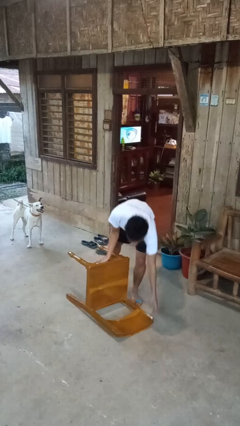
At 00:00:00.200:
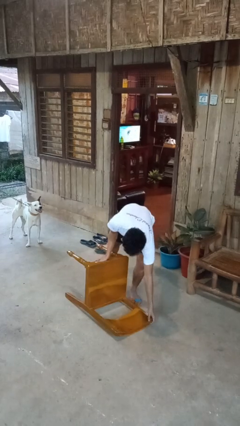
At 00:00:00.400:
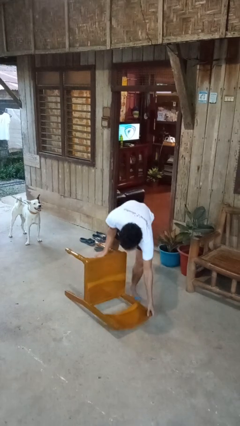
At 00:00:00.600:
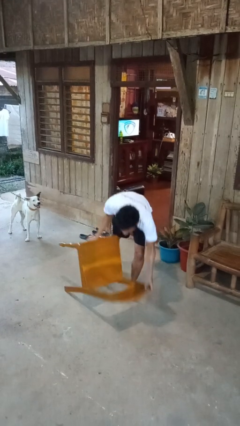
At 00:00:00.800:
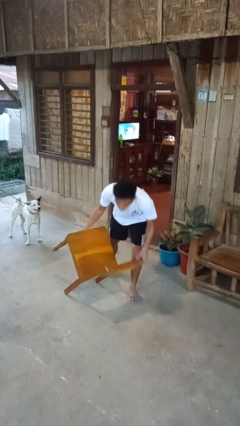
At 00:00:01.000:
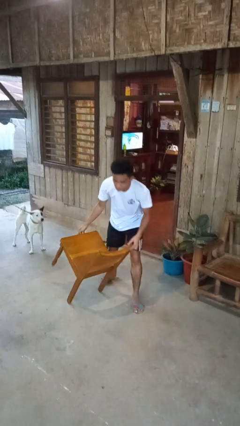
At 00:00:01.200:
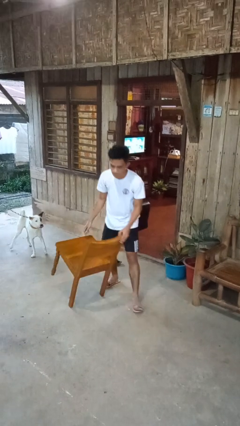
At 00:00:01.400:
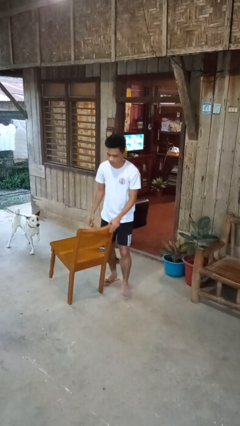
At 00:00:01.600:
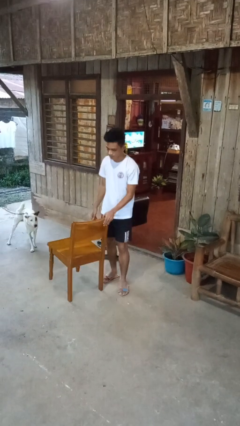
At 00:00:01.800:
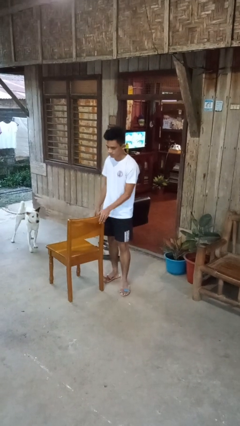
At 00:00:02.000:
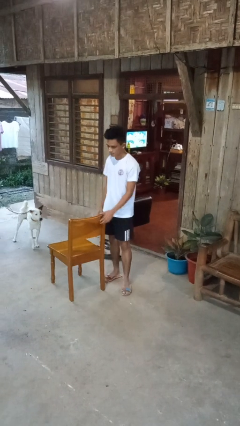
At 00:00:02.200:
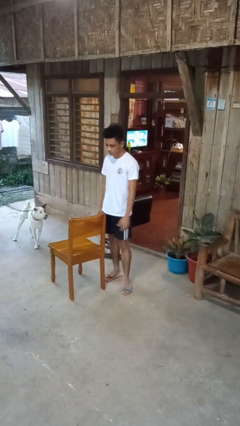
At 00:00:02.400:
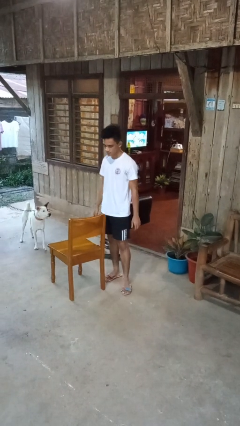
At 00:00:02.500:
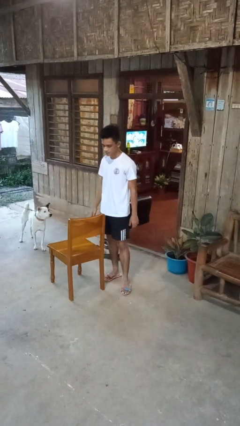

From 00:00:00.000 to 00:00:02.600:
person sets upright furniture

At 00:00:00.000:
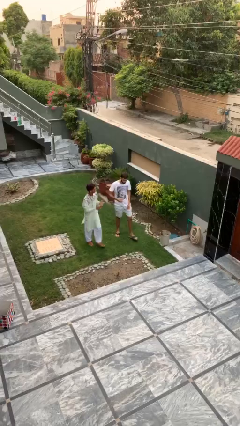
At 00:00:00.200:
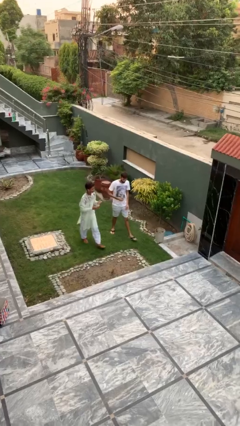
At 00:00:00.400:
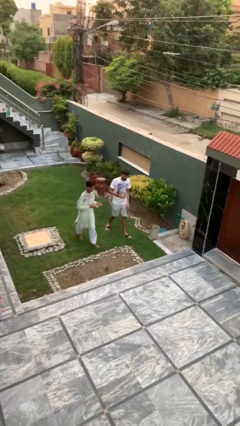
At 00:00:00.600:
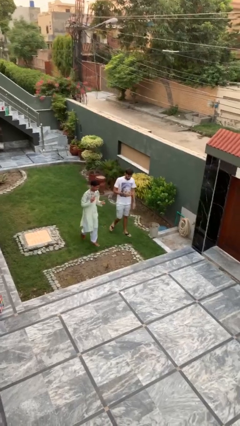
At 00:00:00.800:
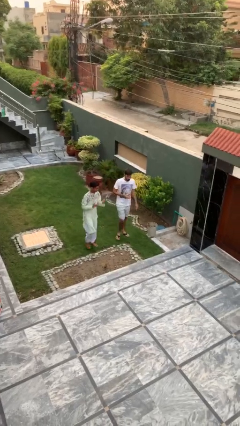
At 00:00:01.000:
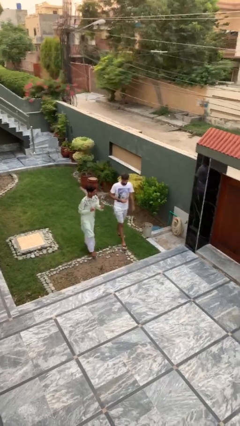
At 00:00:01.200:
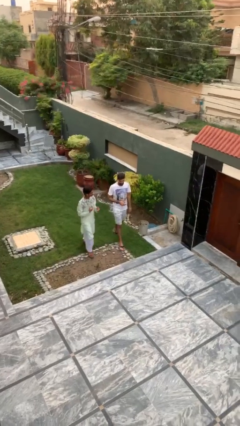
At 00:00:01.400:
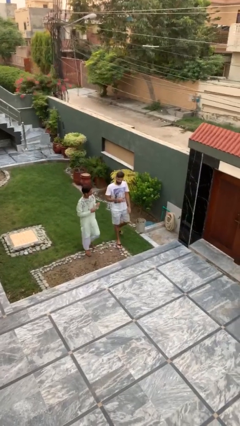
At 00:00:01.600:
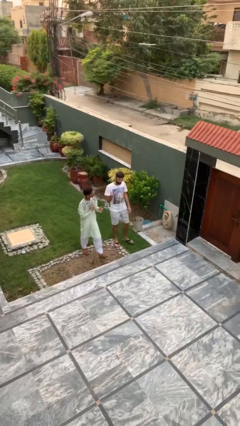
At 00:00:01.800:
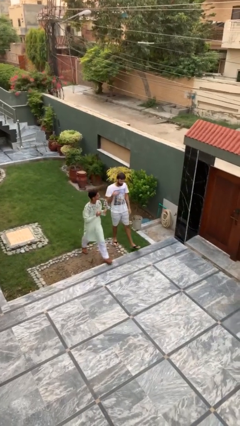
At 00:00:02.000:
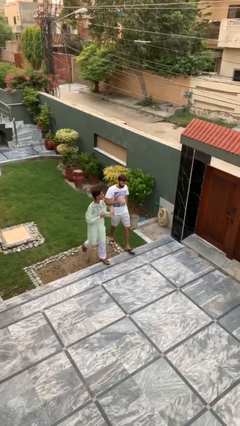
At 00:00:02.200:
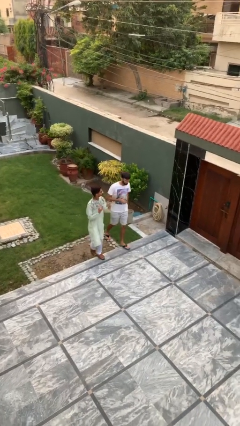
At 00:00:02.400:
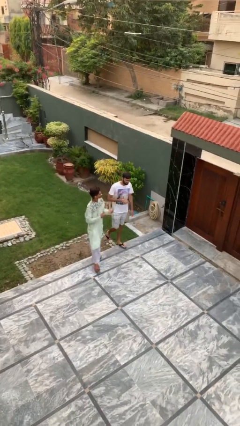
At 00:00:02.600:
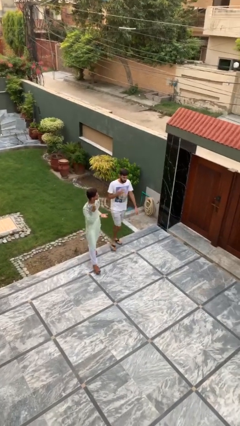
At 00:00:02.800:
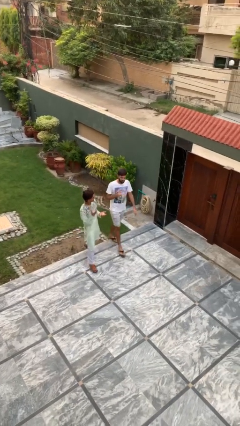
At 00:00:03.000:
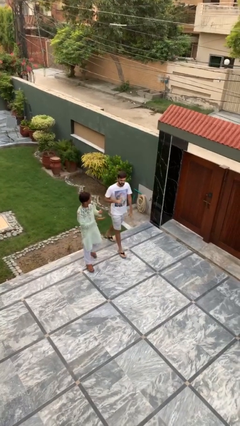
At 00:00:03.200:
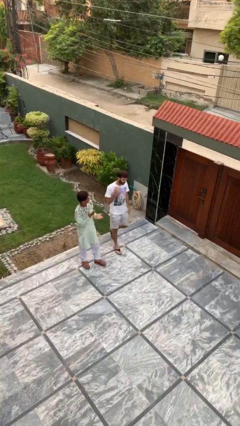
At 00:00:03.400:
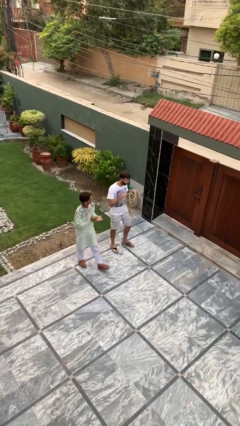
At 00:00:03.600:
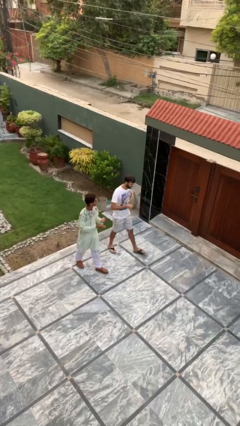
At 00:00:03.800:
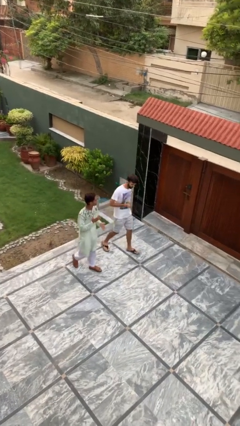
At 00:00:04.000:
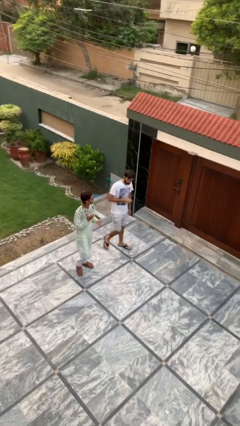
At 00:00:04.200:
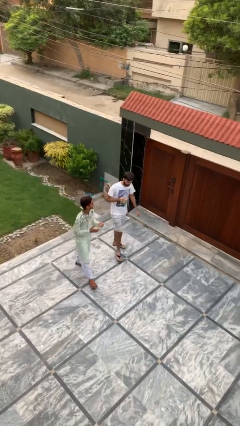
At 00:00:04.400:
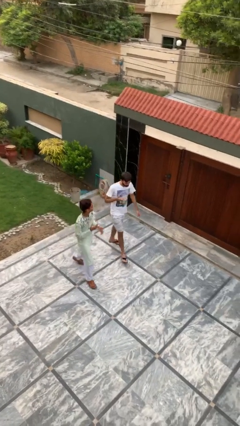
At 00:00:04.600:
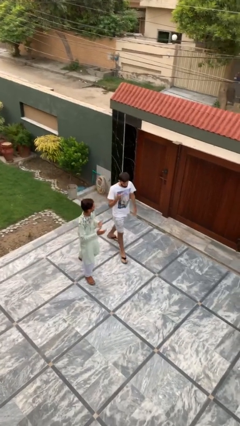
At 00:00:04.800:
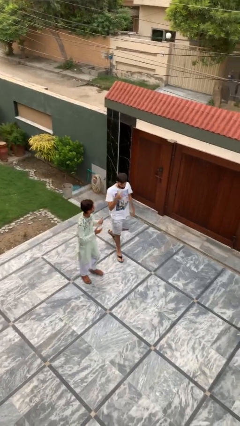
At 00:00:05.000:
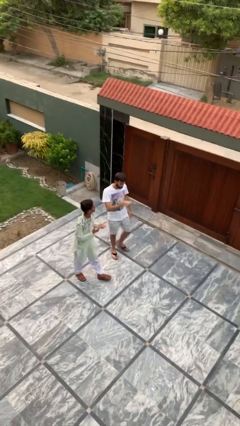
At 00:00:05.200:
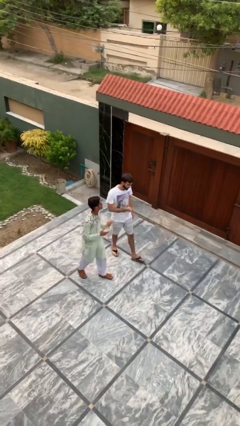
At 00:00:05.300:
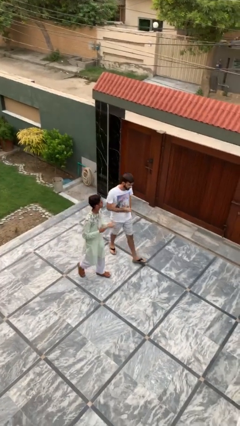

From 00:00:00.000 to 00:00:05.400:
person talks to person

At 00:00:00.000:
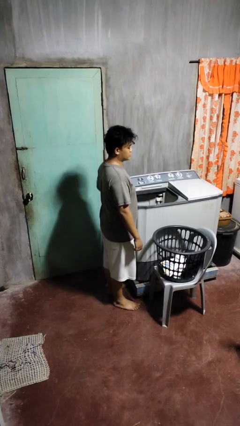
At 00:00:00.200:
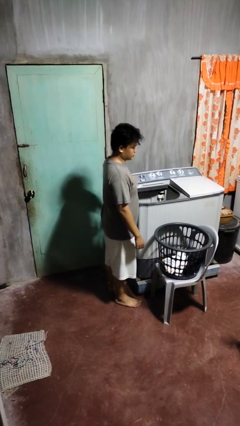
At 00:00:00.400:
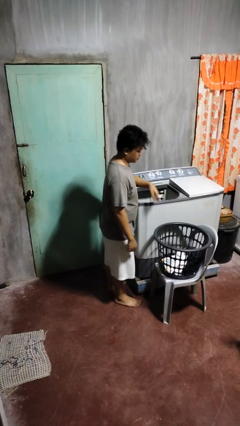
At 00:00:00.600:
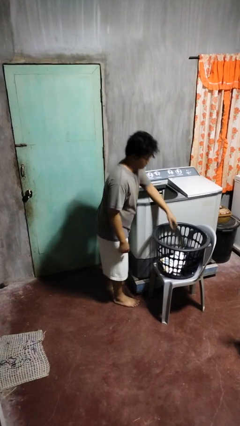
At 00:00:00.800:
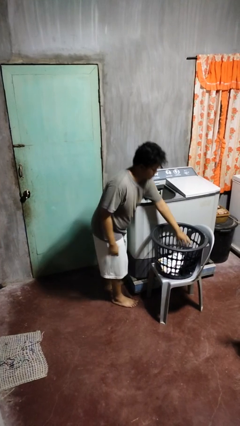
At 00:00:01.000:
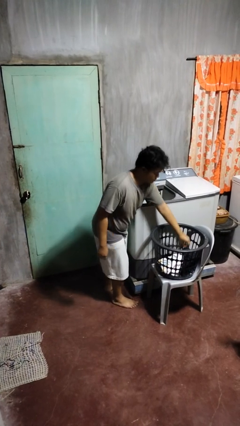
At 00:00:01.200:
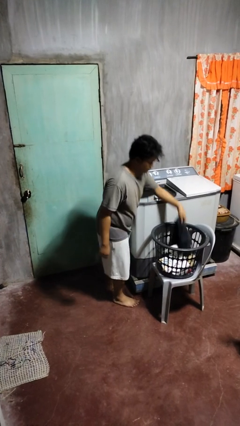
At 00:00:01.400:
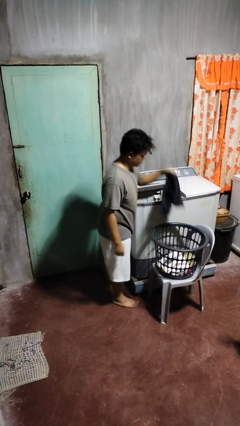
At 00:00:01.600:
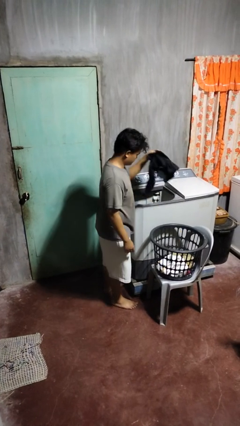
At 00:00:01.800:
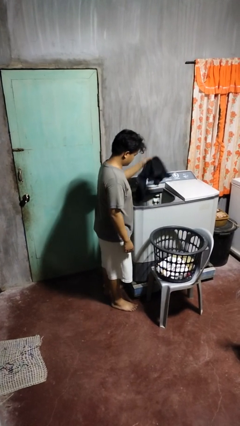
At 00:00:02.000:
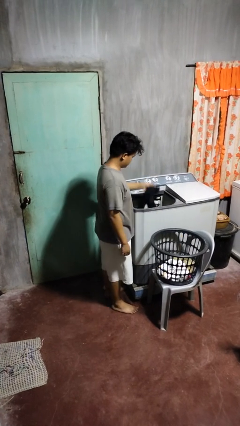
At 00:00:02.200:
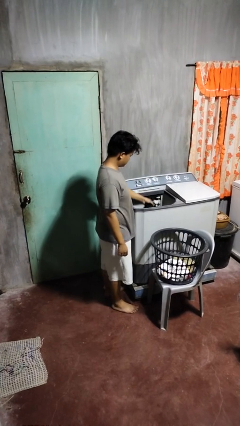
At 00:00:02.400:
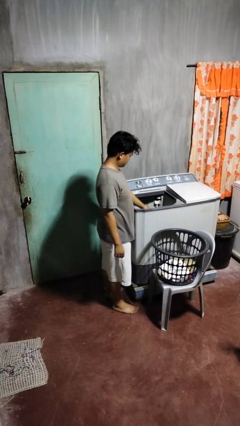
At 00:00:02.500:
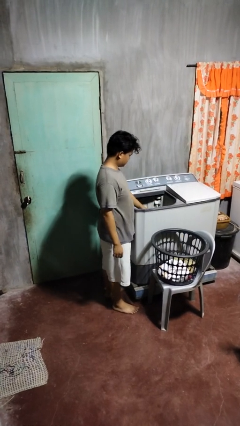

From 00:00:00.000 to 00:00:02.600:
person loads clotheswasher

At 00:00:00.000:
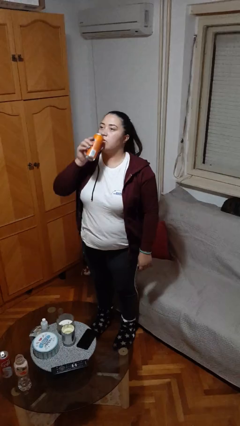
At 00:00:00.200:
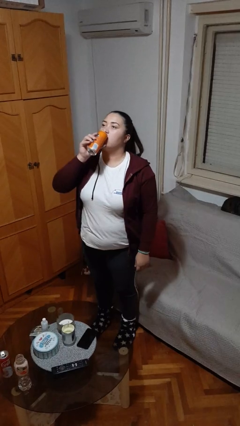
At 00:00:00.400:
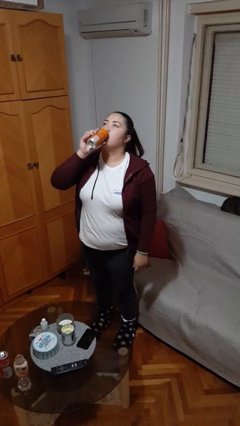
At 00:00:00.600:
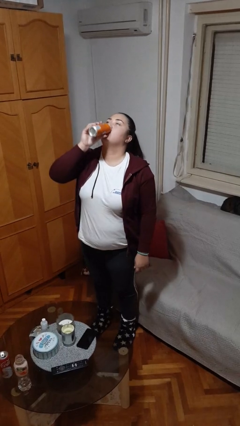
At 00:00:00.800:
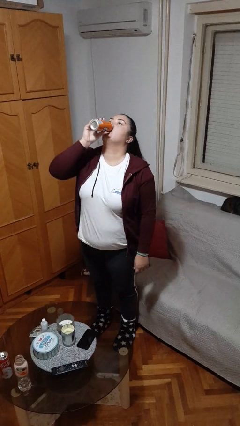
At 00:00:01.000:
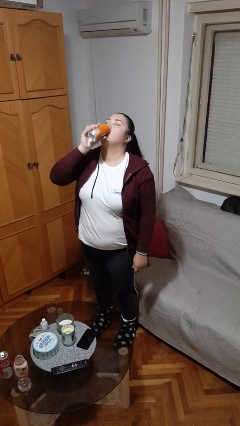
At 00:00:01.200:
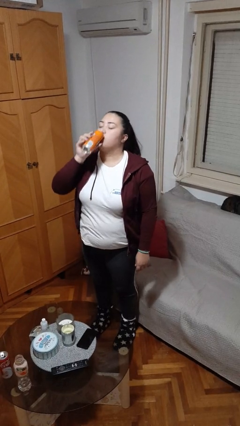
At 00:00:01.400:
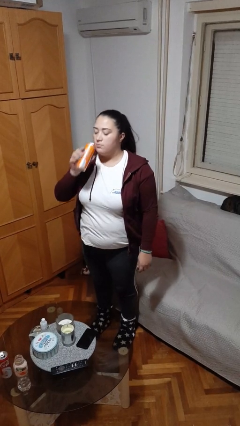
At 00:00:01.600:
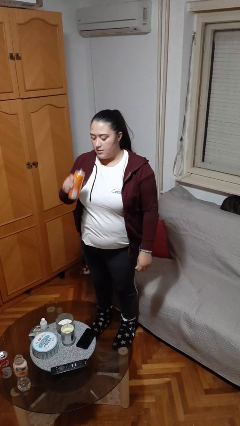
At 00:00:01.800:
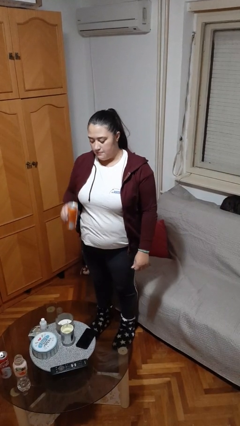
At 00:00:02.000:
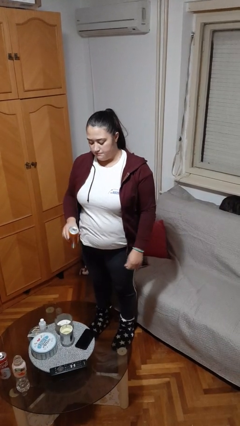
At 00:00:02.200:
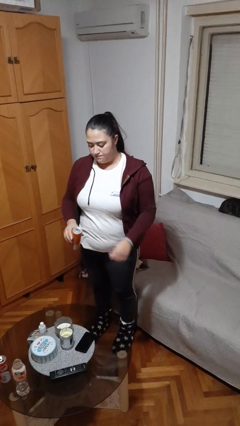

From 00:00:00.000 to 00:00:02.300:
person drinks from beverage can

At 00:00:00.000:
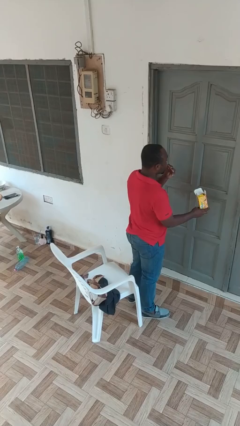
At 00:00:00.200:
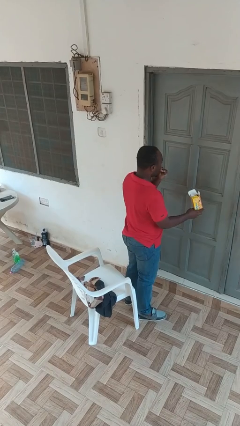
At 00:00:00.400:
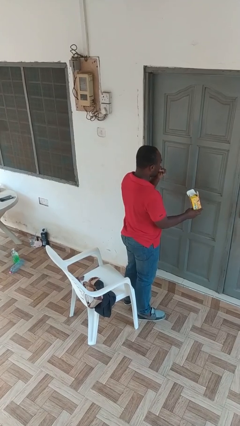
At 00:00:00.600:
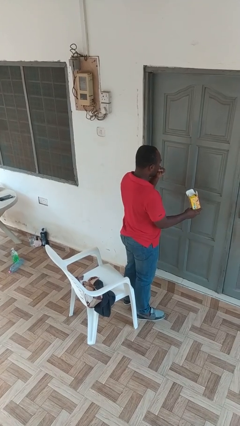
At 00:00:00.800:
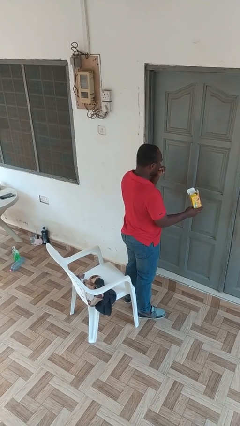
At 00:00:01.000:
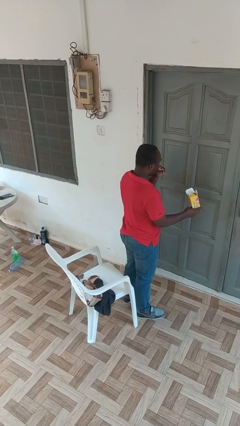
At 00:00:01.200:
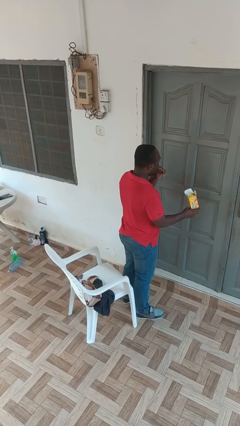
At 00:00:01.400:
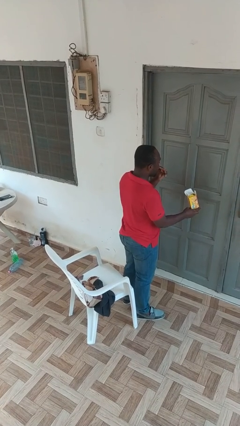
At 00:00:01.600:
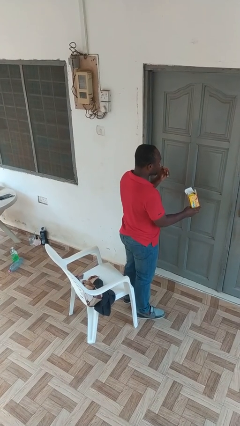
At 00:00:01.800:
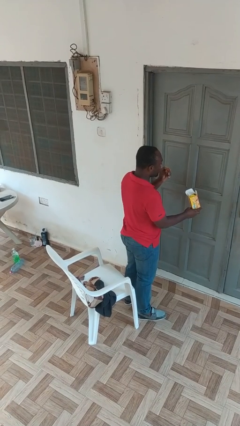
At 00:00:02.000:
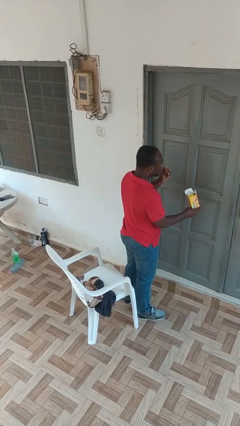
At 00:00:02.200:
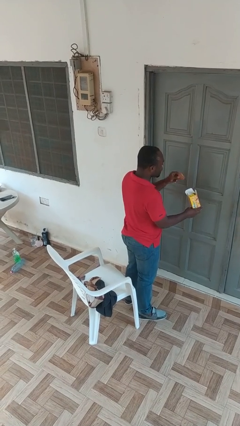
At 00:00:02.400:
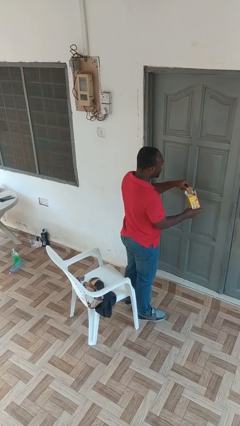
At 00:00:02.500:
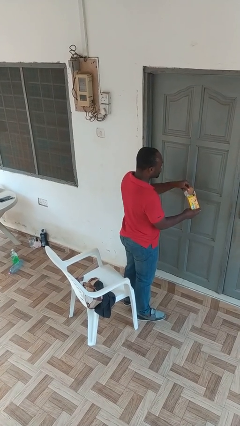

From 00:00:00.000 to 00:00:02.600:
person eats snack from bag

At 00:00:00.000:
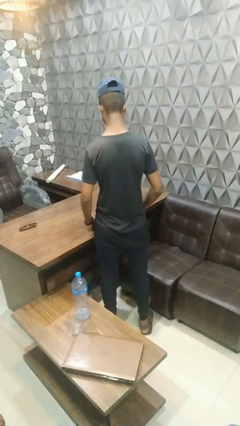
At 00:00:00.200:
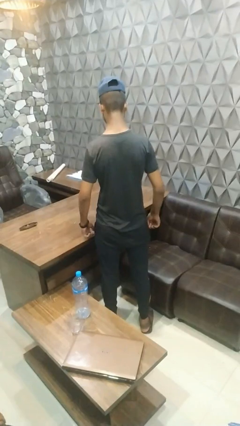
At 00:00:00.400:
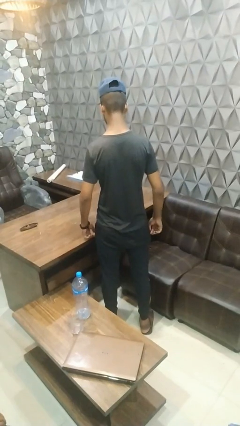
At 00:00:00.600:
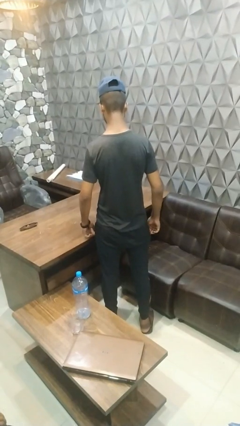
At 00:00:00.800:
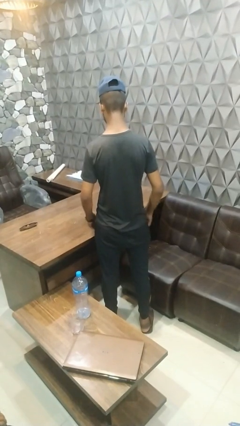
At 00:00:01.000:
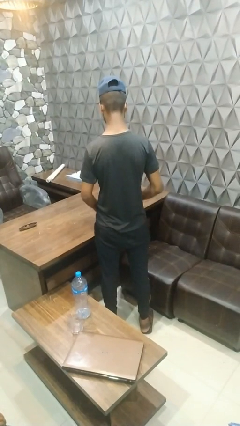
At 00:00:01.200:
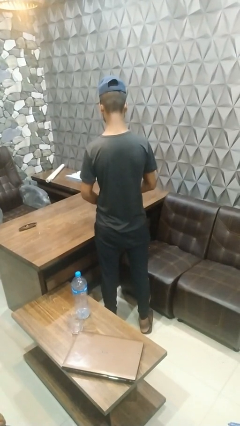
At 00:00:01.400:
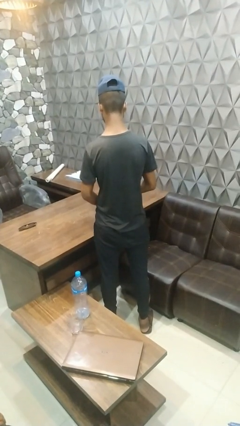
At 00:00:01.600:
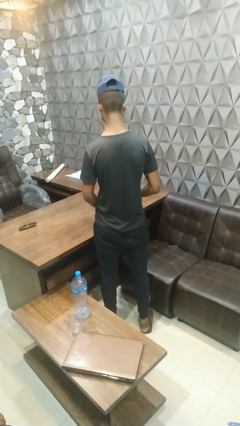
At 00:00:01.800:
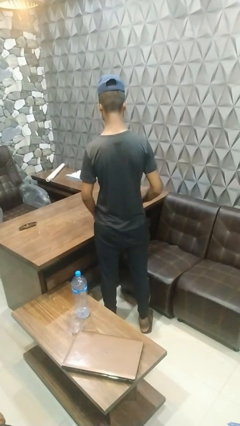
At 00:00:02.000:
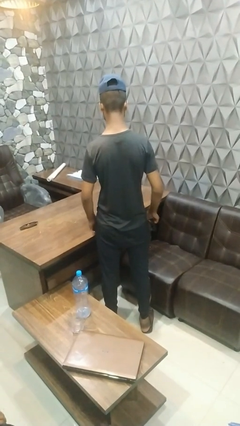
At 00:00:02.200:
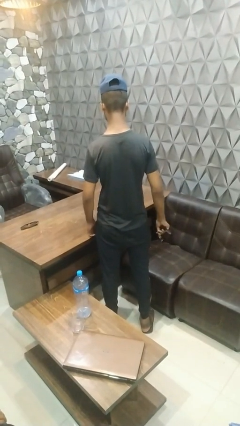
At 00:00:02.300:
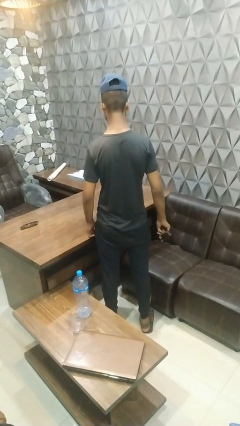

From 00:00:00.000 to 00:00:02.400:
person takes off wristwatch
